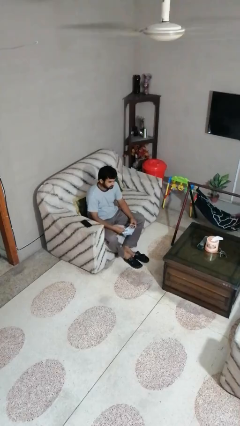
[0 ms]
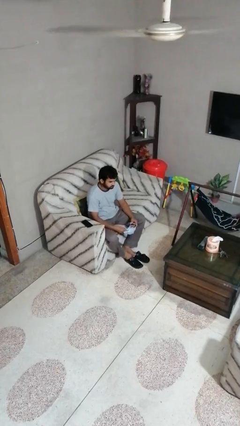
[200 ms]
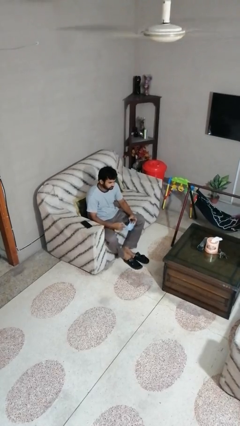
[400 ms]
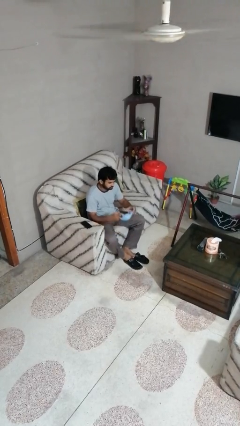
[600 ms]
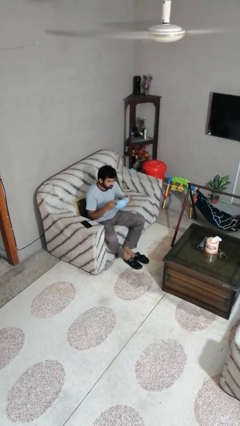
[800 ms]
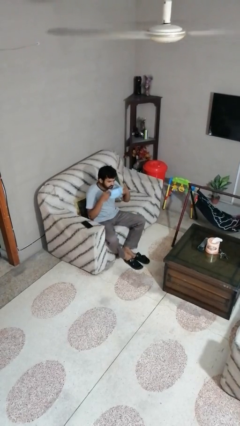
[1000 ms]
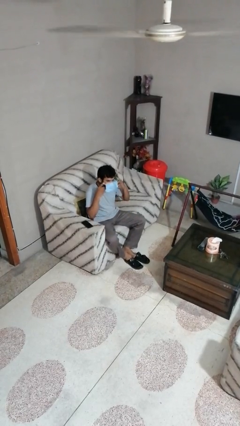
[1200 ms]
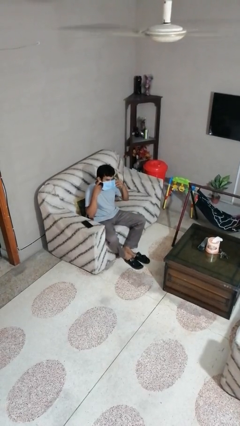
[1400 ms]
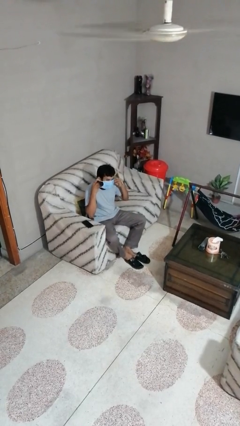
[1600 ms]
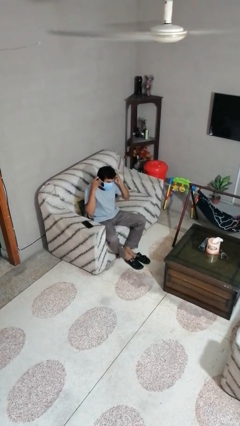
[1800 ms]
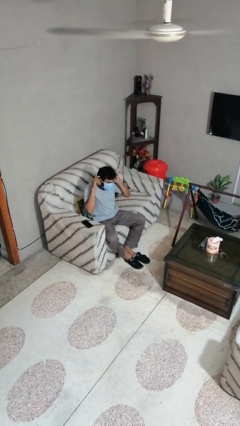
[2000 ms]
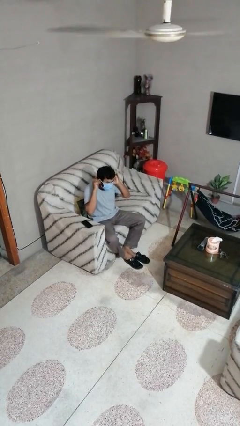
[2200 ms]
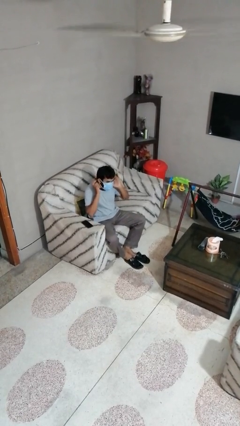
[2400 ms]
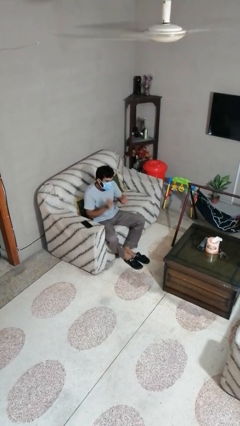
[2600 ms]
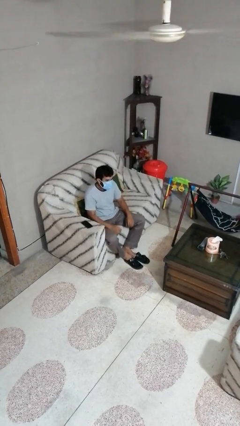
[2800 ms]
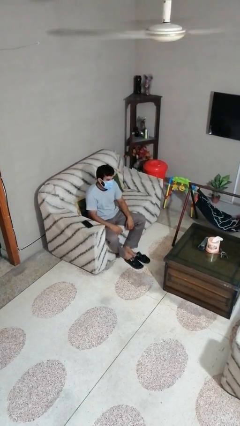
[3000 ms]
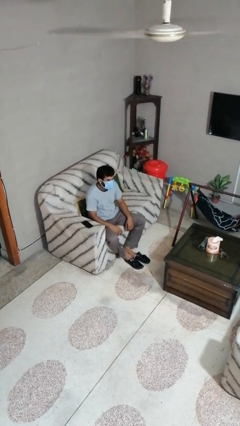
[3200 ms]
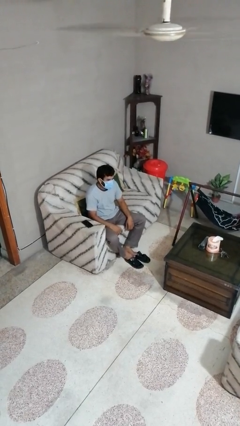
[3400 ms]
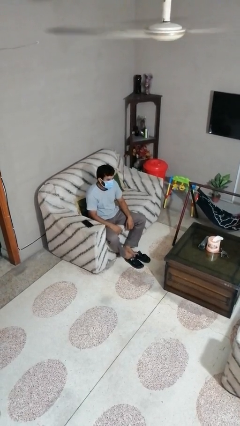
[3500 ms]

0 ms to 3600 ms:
person puts on facemask

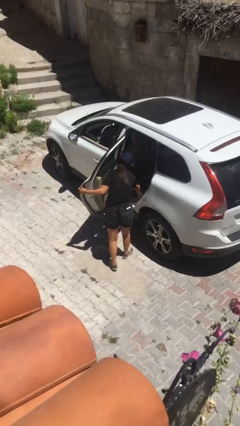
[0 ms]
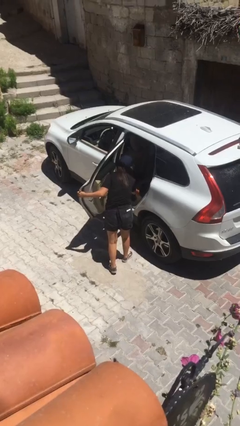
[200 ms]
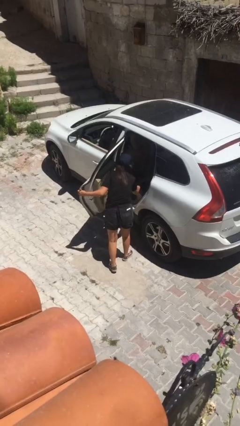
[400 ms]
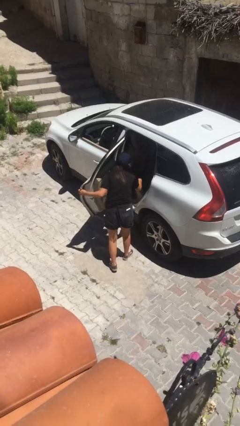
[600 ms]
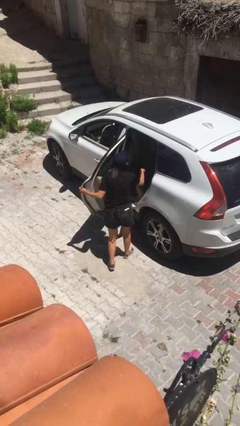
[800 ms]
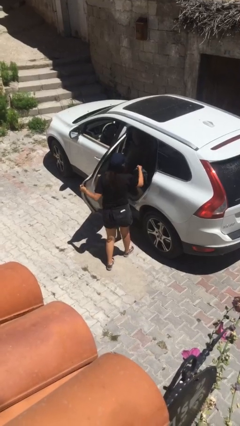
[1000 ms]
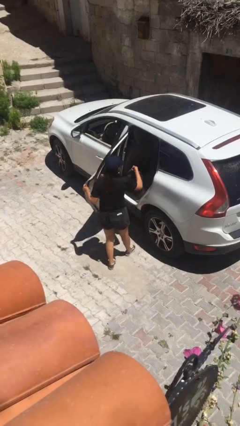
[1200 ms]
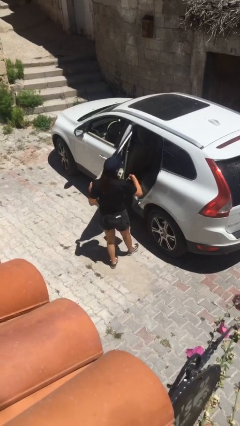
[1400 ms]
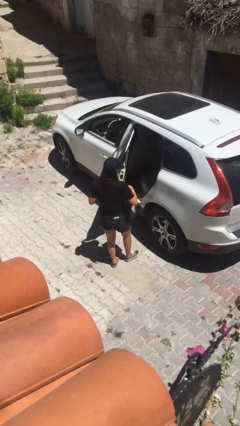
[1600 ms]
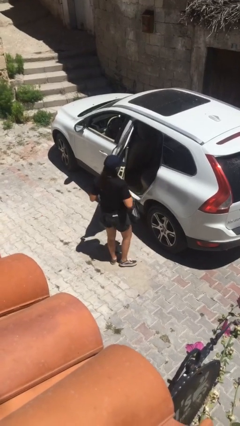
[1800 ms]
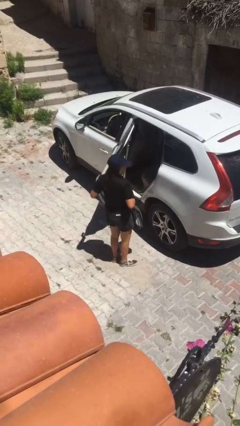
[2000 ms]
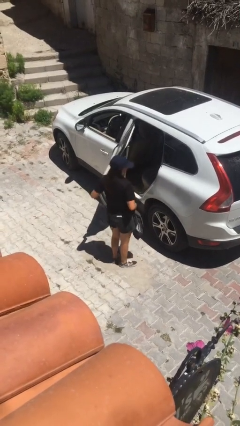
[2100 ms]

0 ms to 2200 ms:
person unloads car

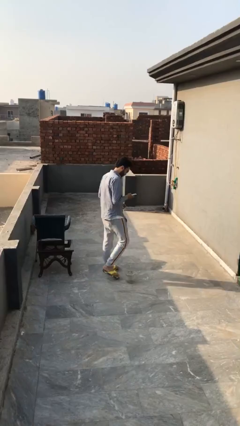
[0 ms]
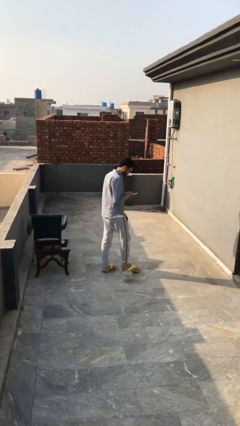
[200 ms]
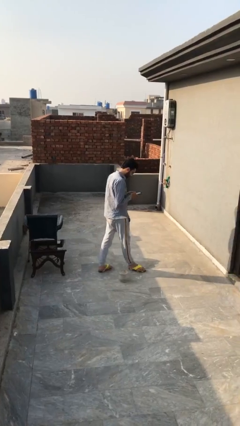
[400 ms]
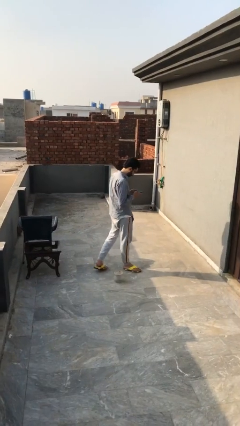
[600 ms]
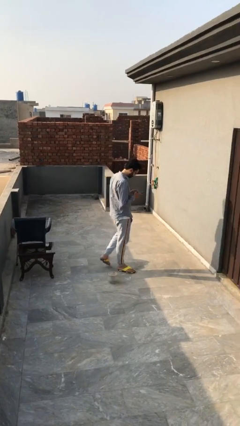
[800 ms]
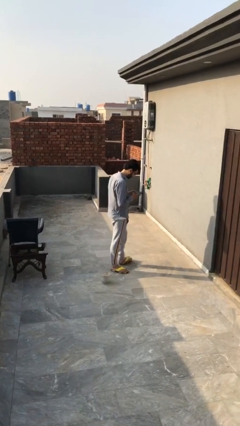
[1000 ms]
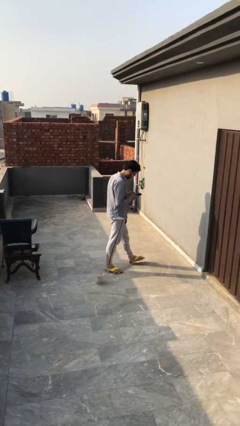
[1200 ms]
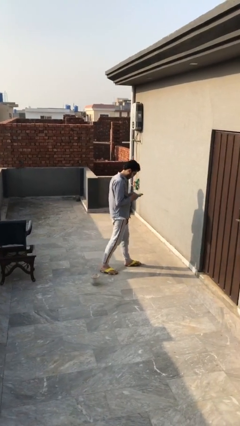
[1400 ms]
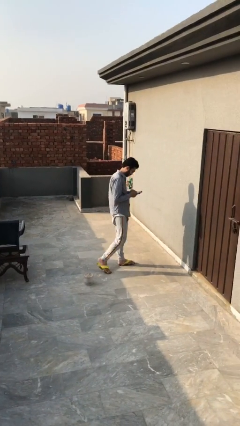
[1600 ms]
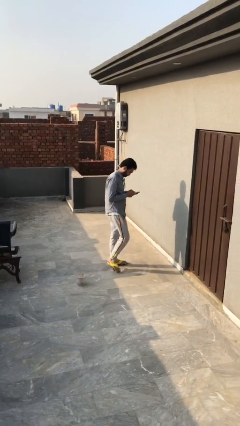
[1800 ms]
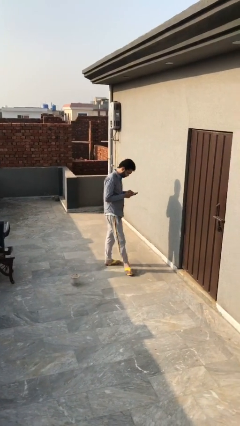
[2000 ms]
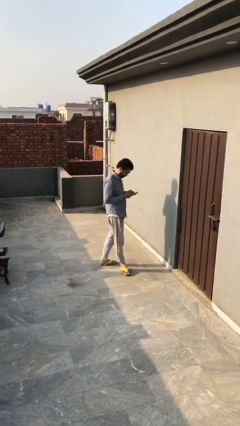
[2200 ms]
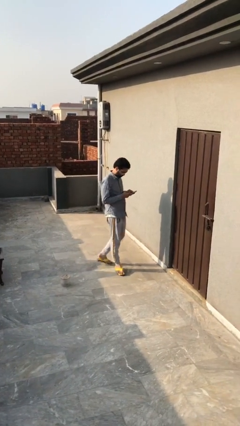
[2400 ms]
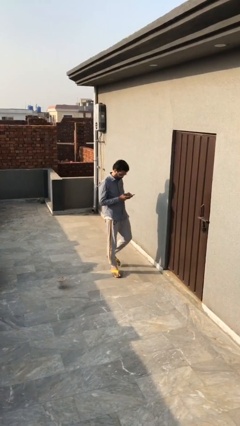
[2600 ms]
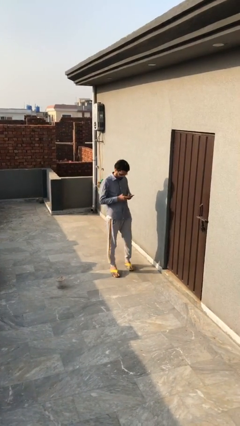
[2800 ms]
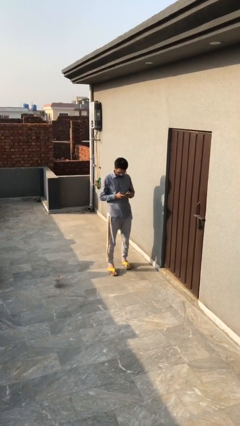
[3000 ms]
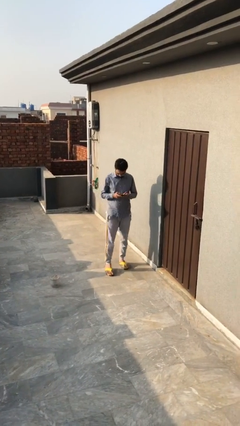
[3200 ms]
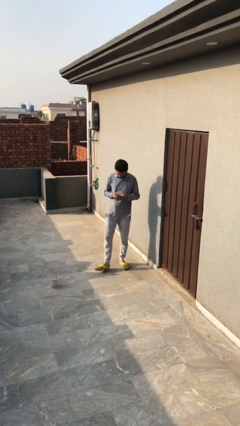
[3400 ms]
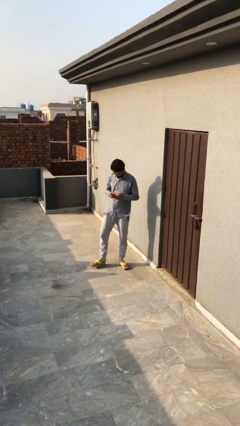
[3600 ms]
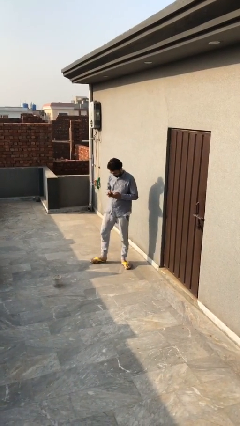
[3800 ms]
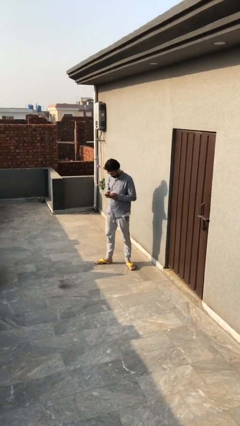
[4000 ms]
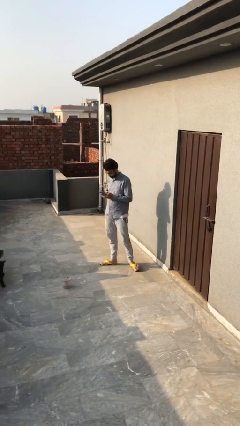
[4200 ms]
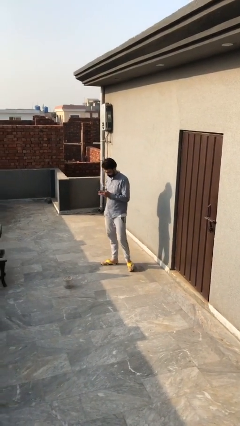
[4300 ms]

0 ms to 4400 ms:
person texts on phone

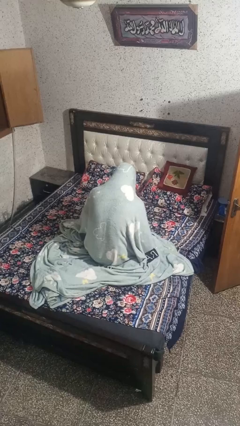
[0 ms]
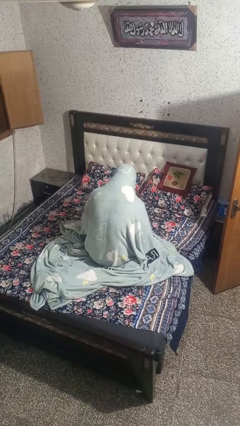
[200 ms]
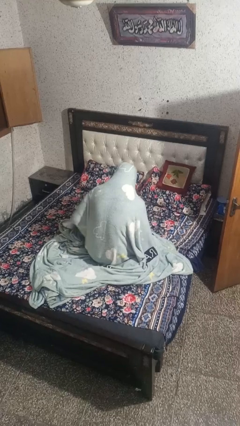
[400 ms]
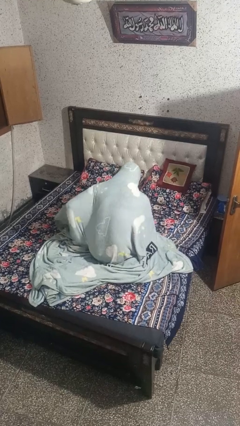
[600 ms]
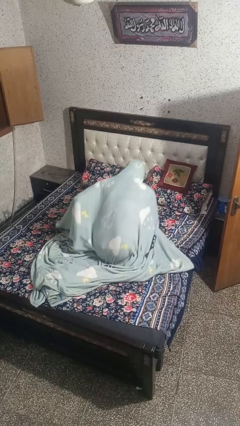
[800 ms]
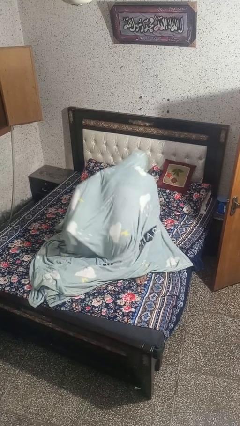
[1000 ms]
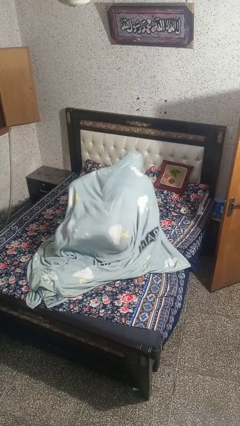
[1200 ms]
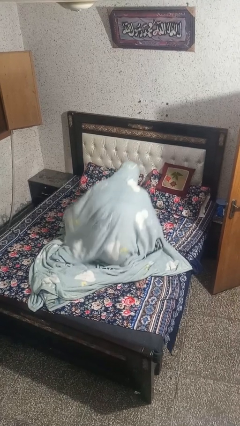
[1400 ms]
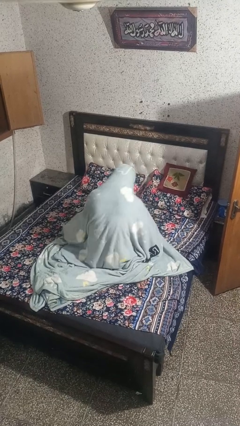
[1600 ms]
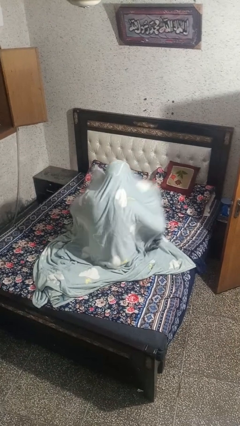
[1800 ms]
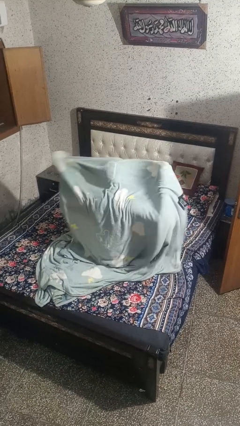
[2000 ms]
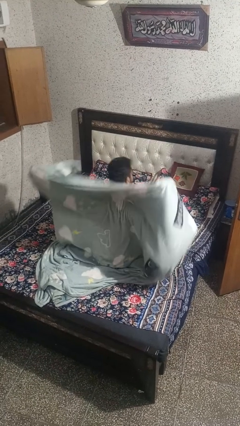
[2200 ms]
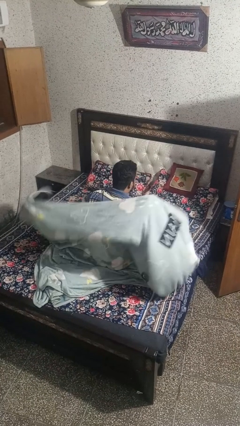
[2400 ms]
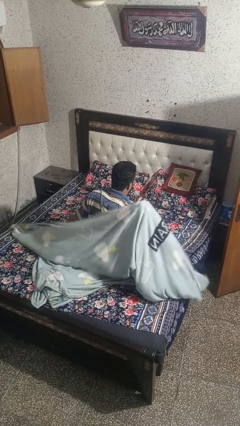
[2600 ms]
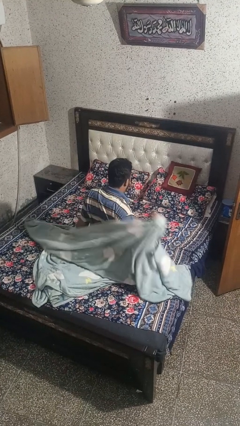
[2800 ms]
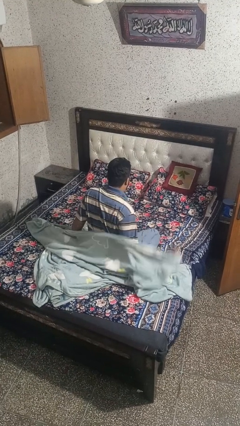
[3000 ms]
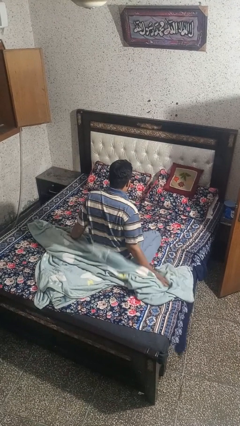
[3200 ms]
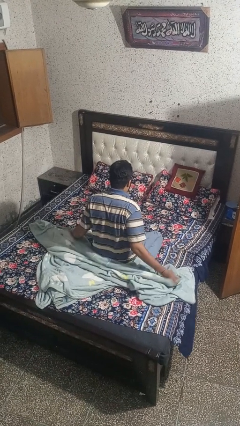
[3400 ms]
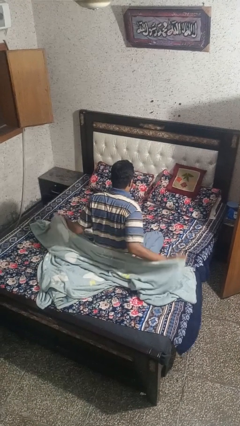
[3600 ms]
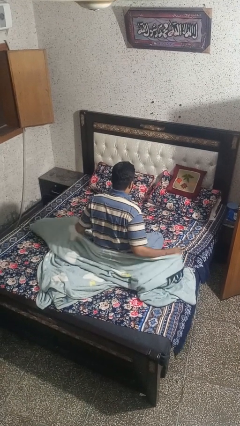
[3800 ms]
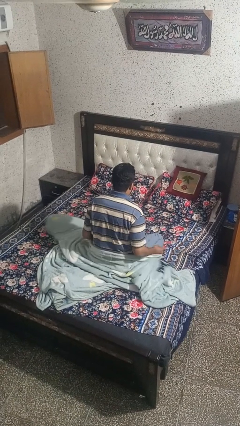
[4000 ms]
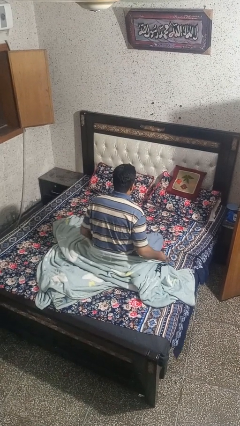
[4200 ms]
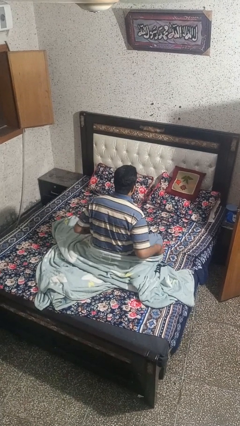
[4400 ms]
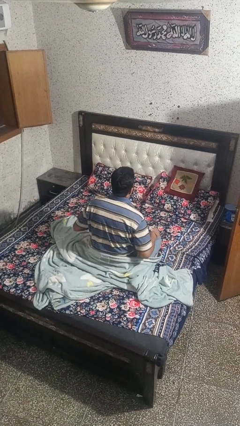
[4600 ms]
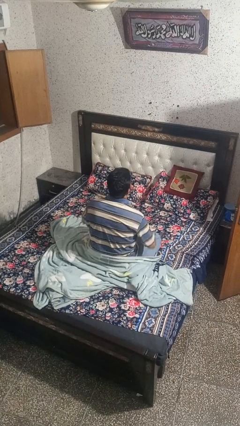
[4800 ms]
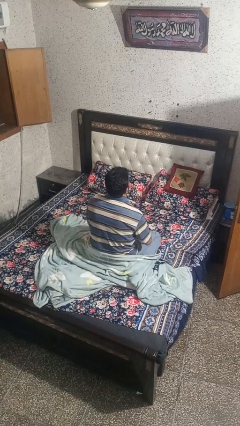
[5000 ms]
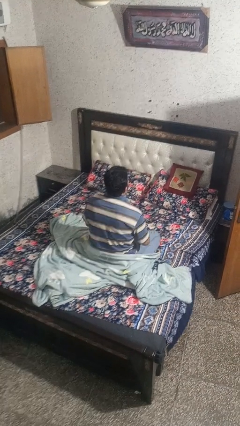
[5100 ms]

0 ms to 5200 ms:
person uncovers with blanket

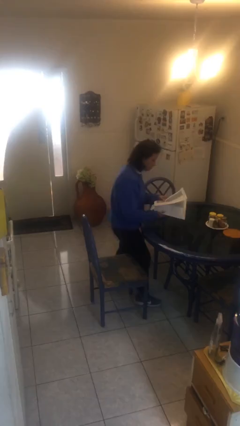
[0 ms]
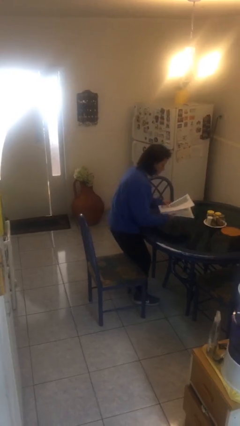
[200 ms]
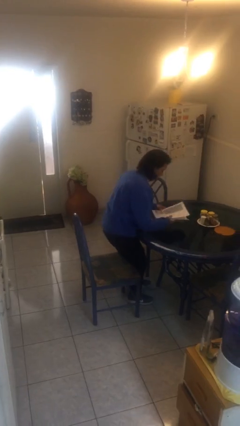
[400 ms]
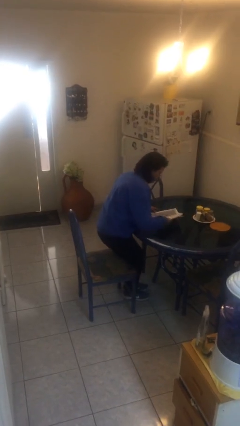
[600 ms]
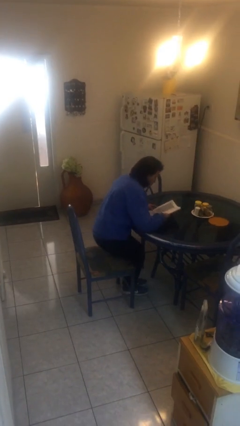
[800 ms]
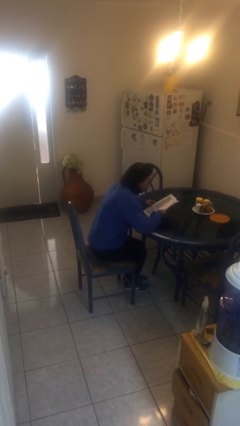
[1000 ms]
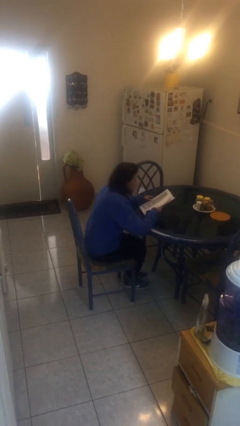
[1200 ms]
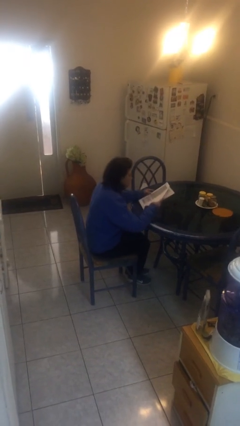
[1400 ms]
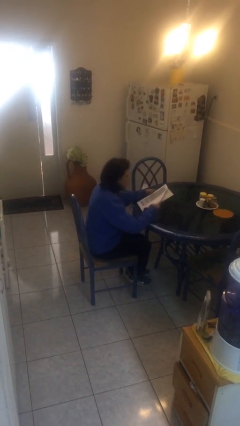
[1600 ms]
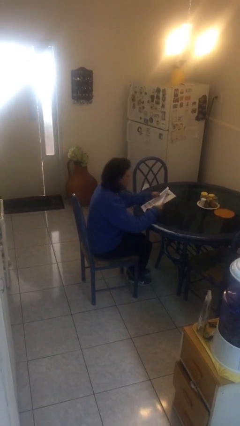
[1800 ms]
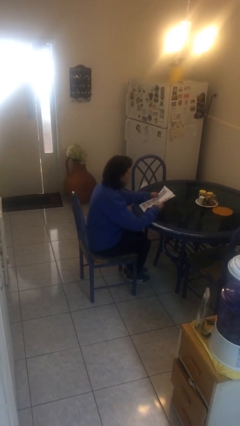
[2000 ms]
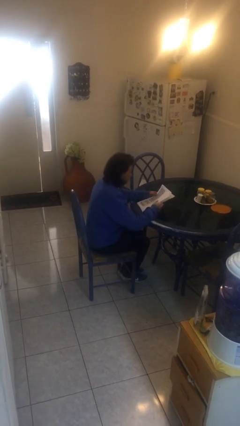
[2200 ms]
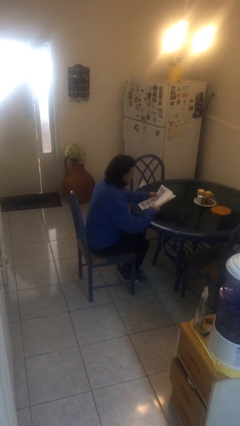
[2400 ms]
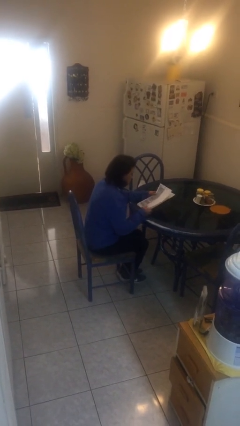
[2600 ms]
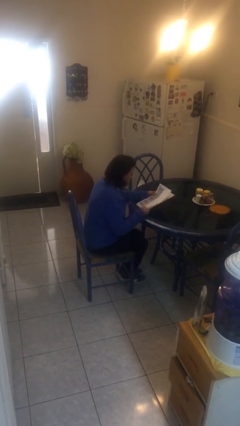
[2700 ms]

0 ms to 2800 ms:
person sits down
